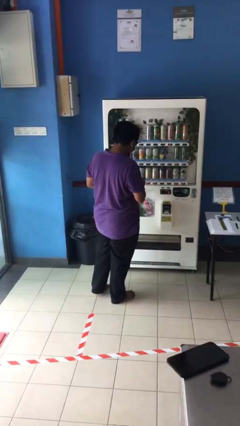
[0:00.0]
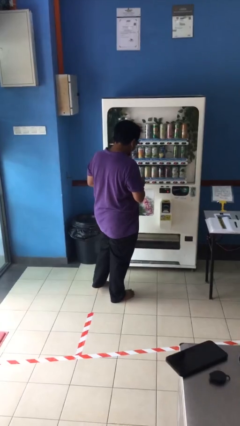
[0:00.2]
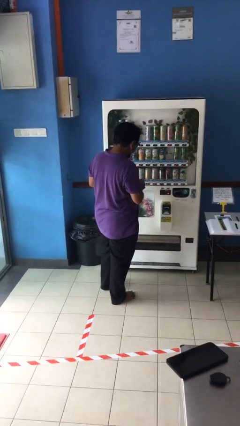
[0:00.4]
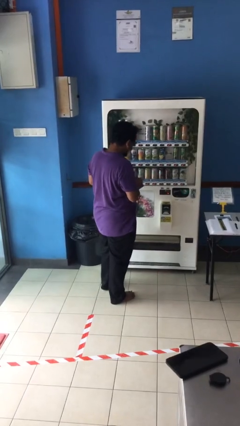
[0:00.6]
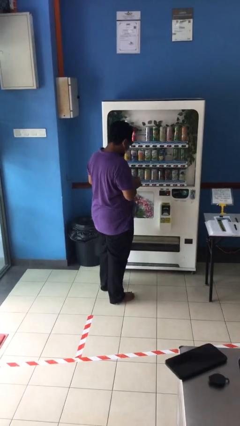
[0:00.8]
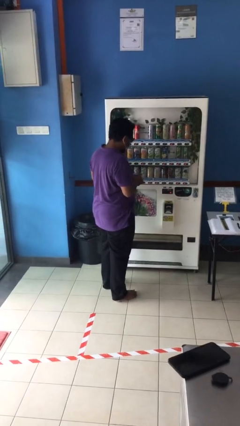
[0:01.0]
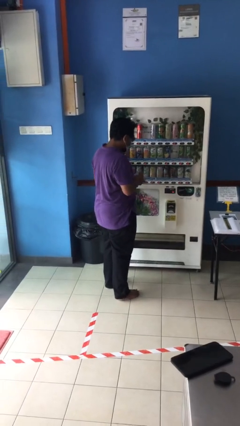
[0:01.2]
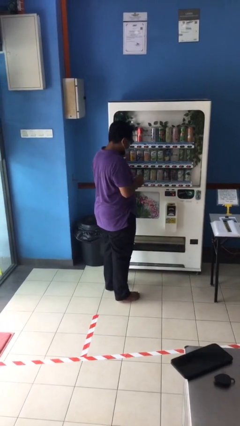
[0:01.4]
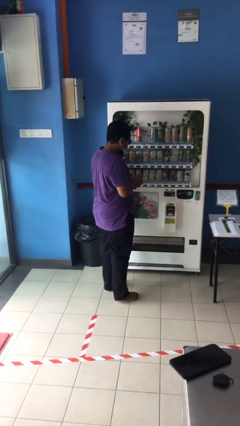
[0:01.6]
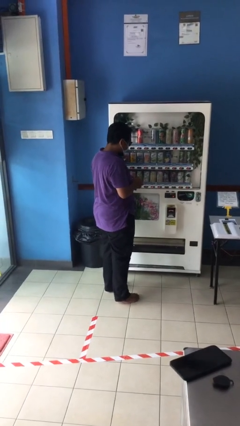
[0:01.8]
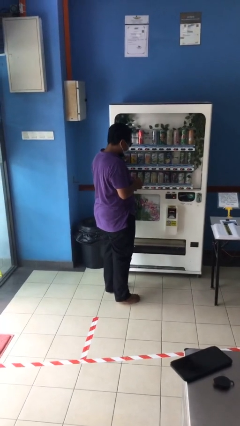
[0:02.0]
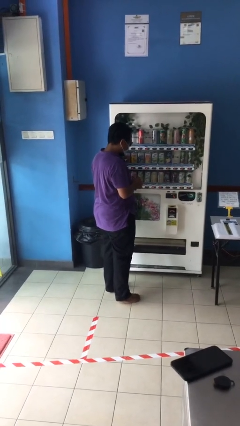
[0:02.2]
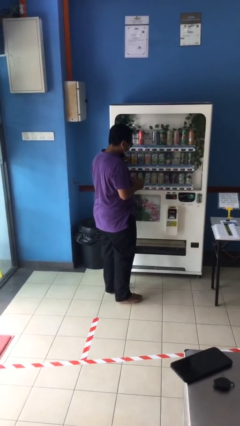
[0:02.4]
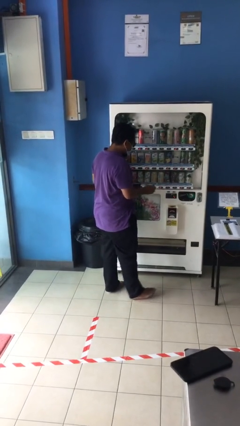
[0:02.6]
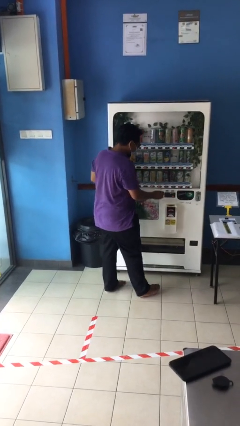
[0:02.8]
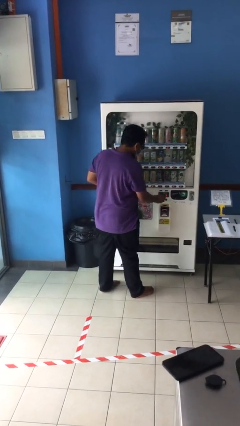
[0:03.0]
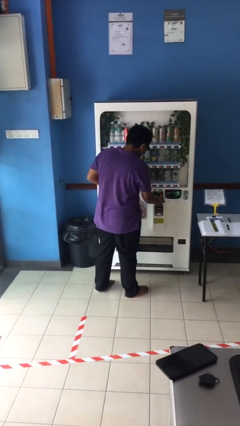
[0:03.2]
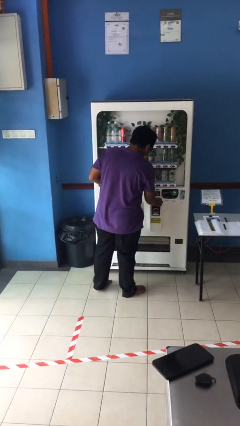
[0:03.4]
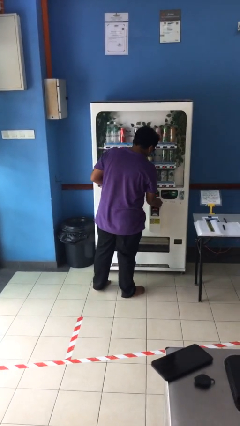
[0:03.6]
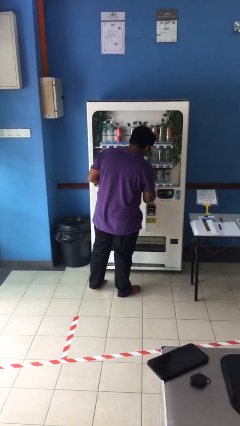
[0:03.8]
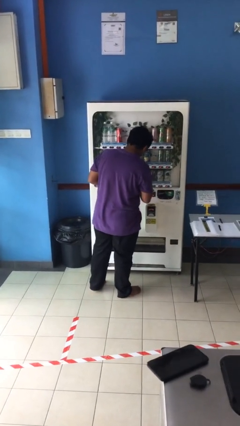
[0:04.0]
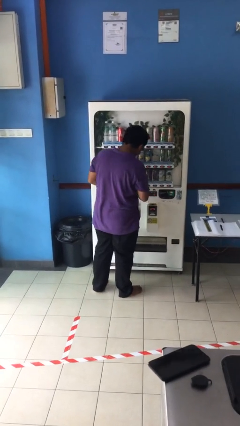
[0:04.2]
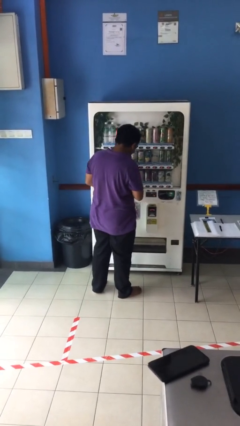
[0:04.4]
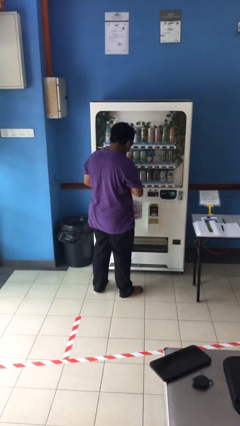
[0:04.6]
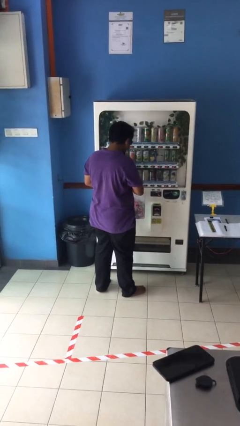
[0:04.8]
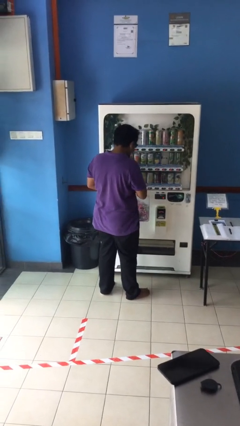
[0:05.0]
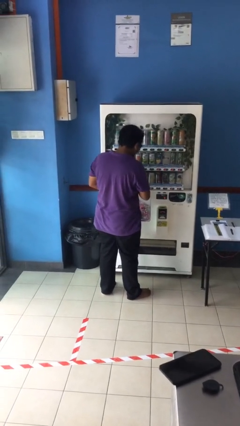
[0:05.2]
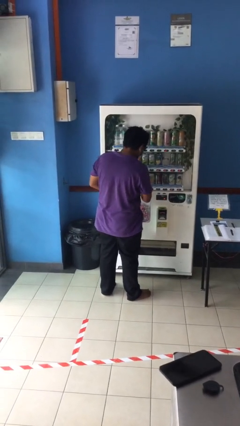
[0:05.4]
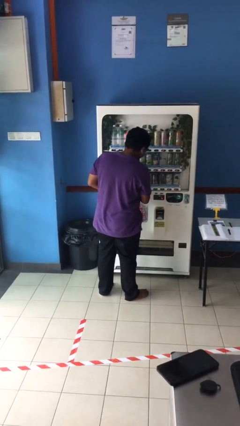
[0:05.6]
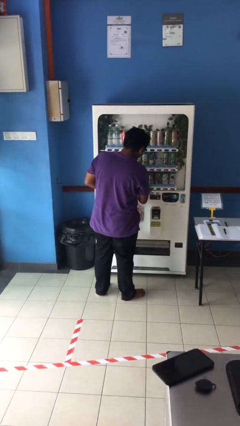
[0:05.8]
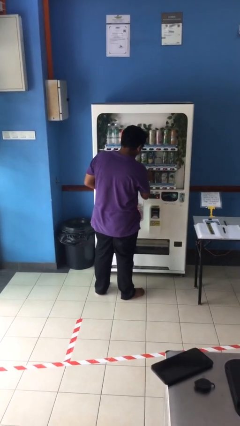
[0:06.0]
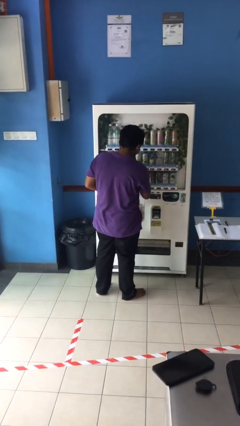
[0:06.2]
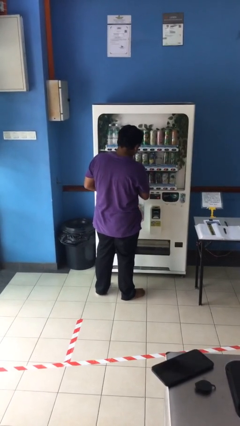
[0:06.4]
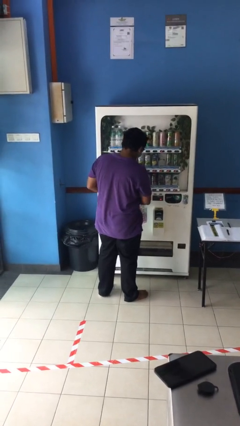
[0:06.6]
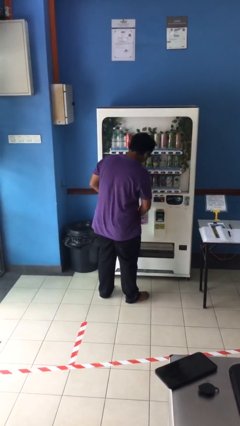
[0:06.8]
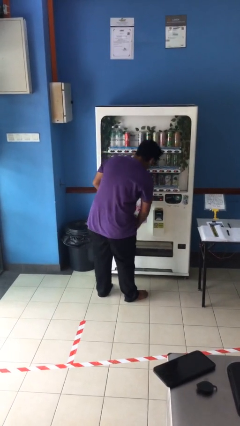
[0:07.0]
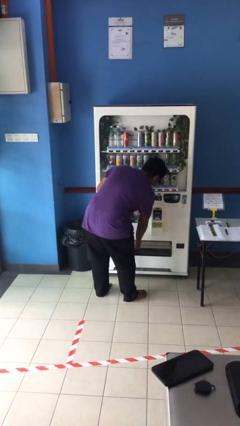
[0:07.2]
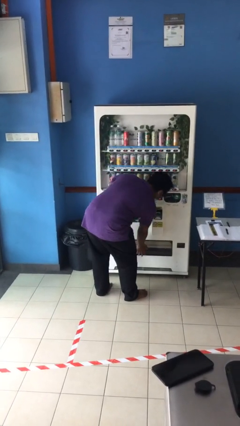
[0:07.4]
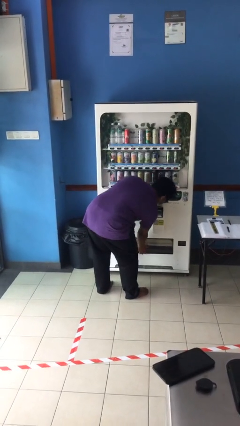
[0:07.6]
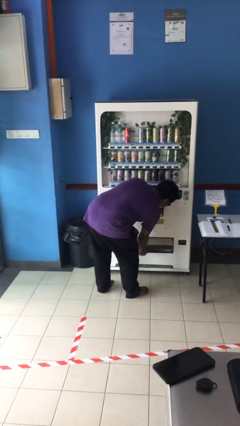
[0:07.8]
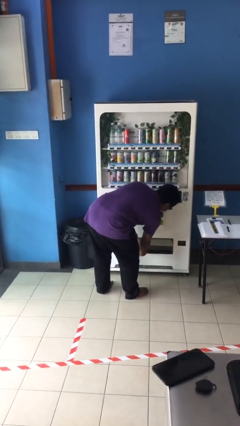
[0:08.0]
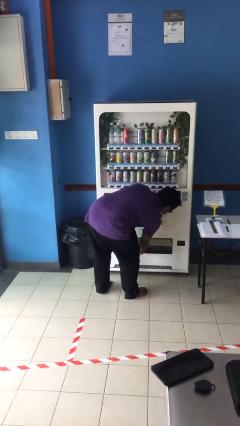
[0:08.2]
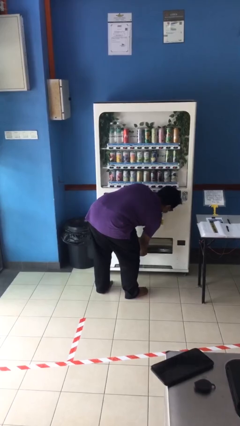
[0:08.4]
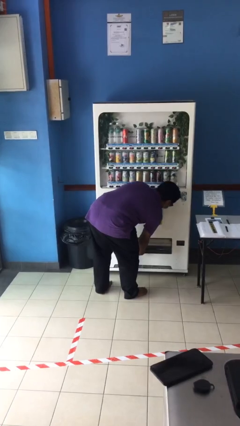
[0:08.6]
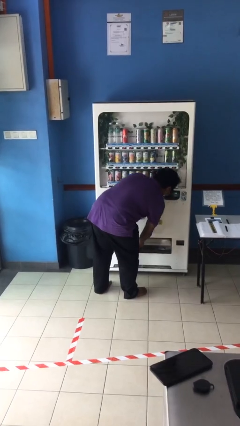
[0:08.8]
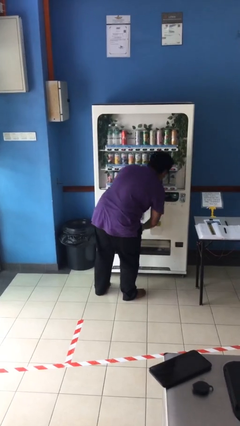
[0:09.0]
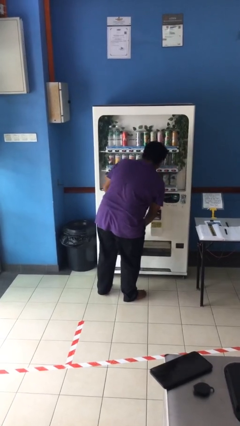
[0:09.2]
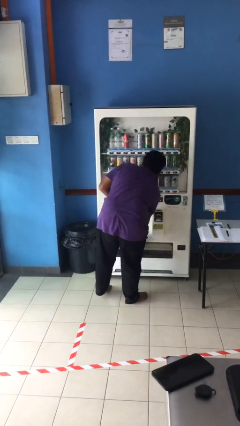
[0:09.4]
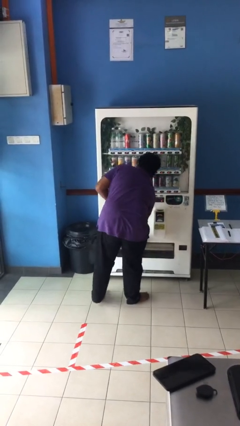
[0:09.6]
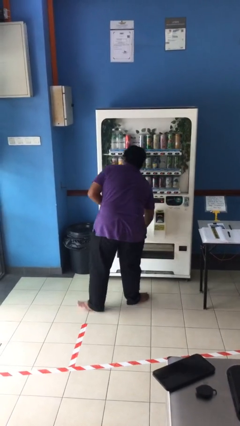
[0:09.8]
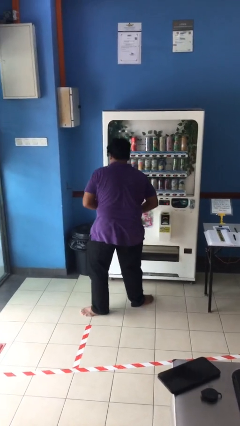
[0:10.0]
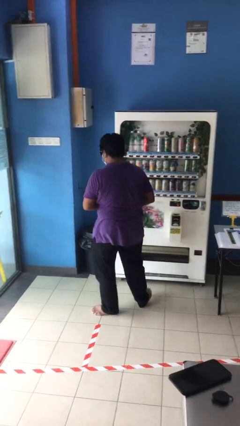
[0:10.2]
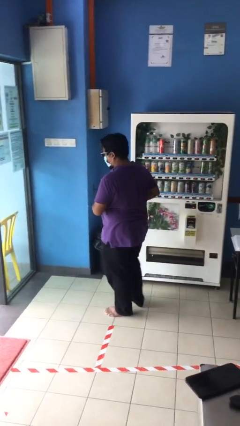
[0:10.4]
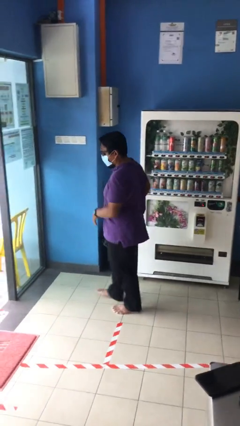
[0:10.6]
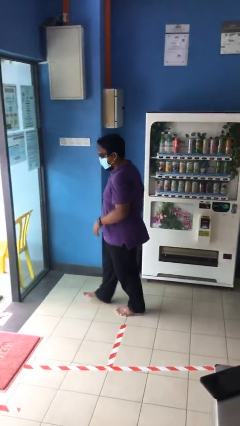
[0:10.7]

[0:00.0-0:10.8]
person purchases from machine

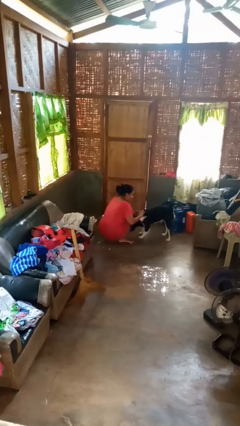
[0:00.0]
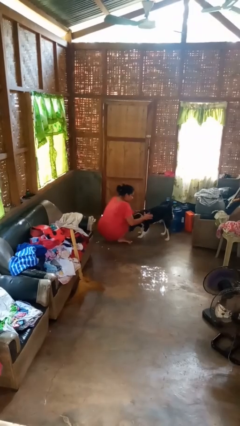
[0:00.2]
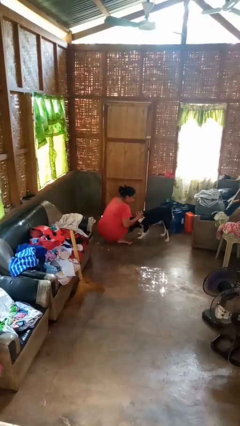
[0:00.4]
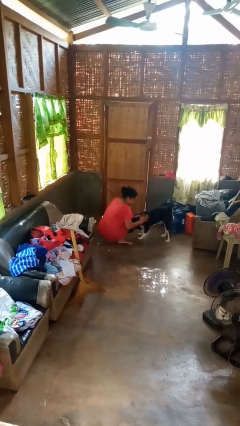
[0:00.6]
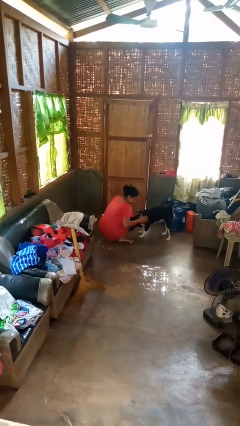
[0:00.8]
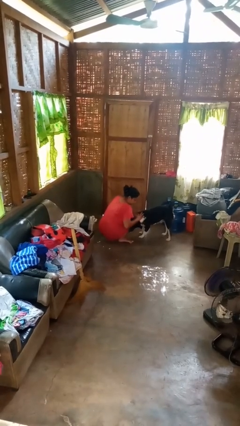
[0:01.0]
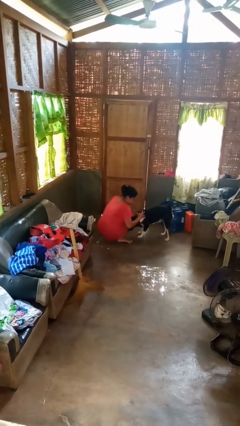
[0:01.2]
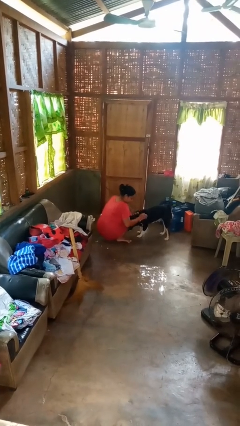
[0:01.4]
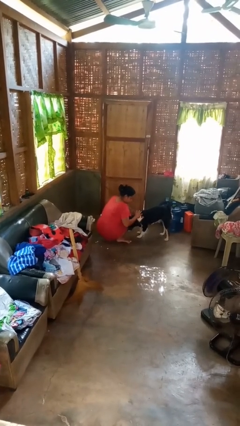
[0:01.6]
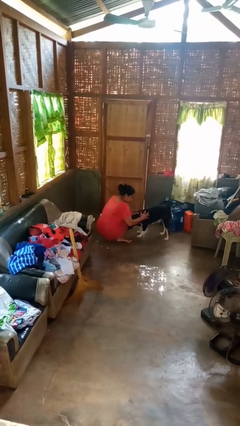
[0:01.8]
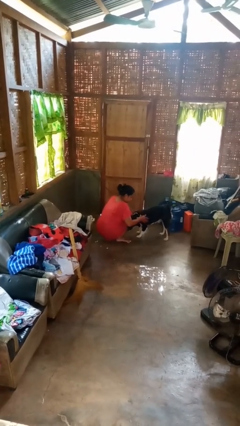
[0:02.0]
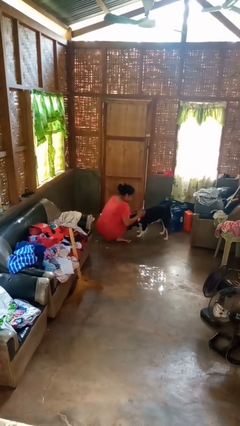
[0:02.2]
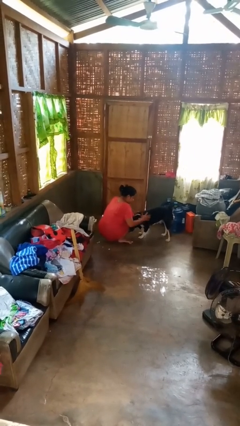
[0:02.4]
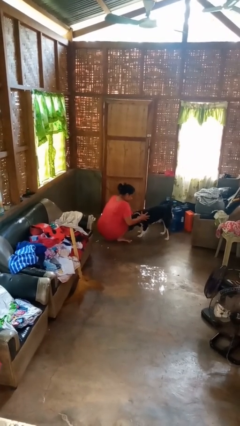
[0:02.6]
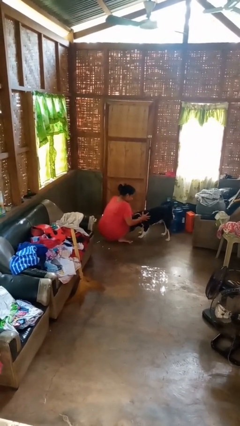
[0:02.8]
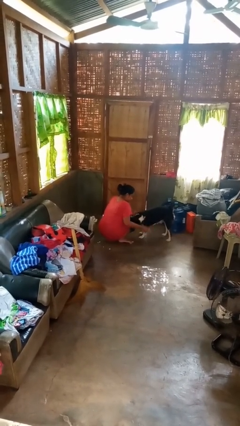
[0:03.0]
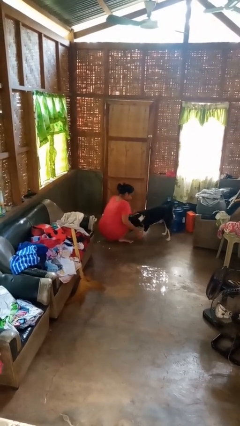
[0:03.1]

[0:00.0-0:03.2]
person pets dog

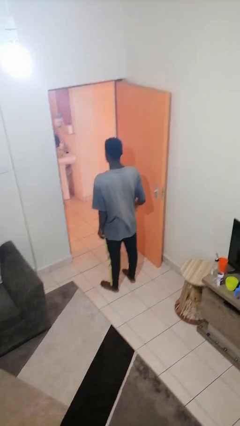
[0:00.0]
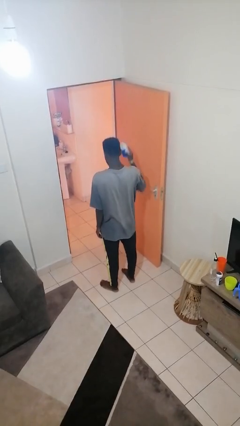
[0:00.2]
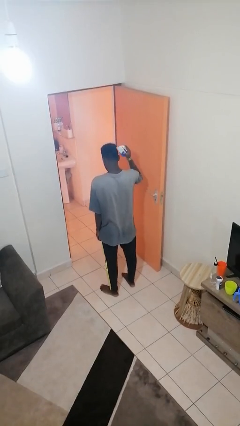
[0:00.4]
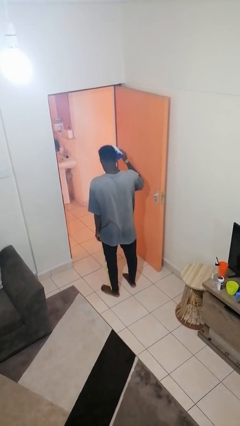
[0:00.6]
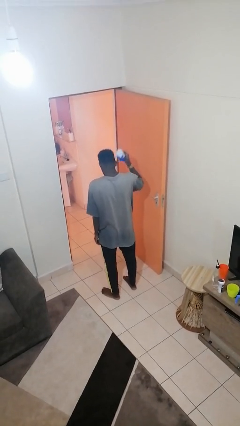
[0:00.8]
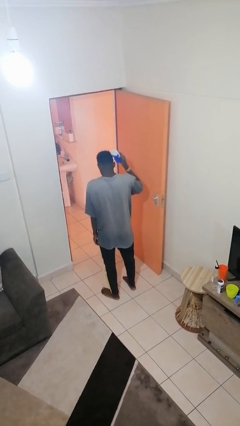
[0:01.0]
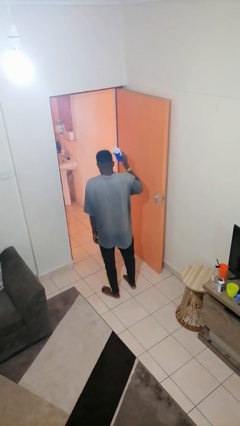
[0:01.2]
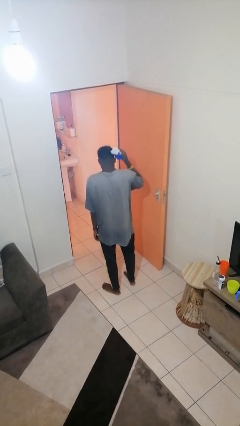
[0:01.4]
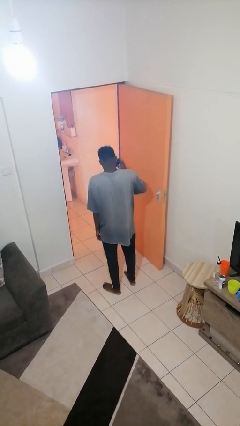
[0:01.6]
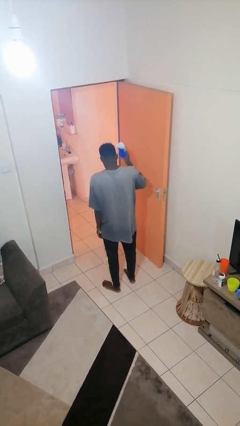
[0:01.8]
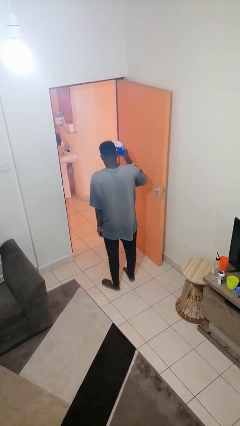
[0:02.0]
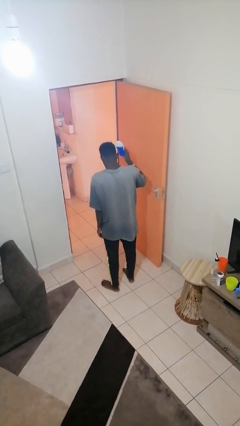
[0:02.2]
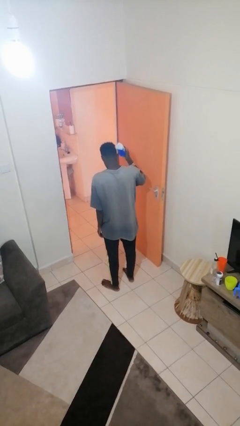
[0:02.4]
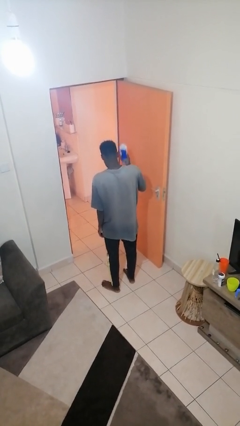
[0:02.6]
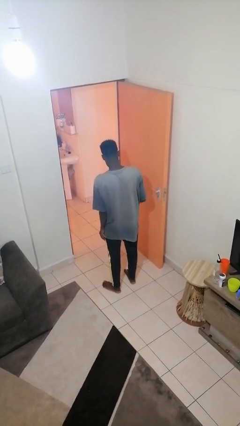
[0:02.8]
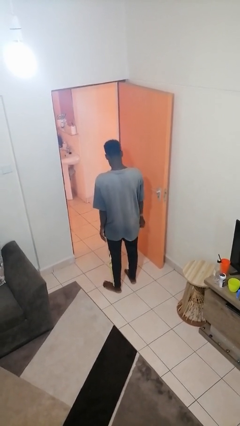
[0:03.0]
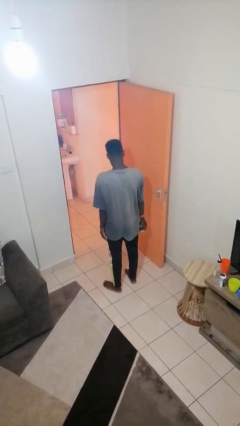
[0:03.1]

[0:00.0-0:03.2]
person brushes hair

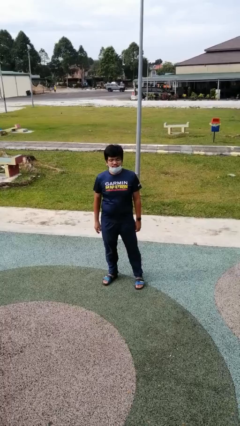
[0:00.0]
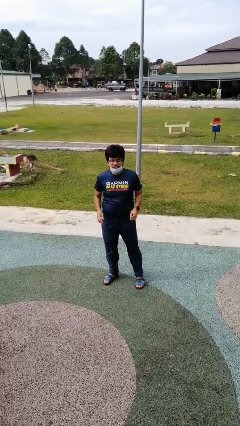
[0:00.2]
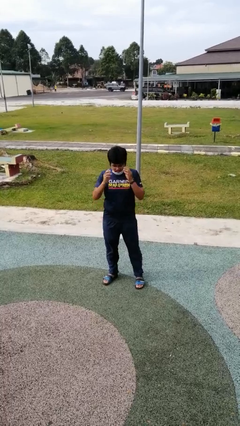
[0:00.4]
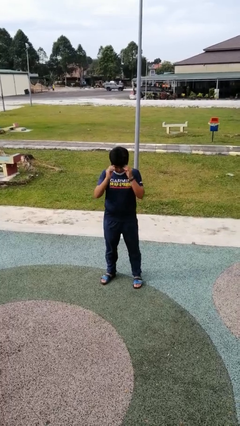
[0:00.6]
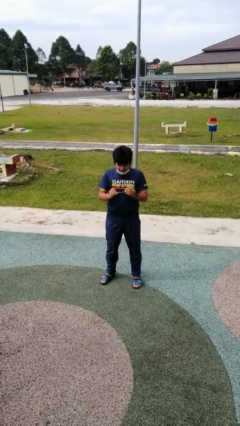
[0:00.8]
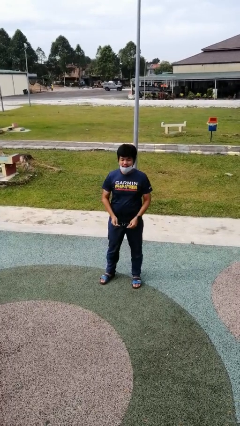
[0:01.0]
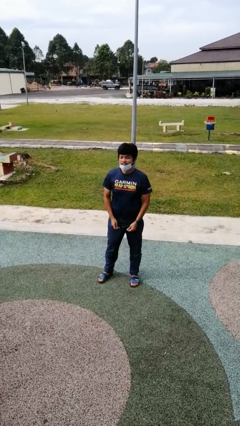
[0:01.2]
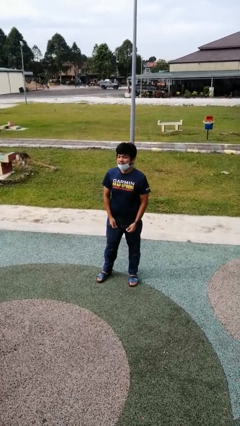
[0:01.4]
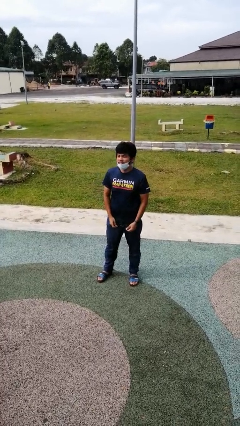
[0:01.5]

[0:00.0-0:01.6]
person takes off glasses
